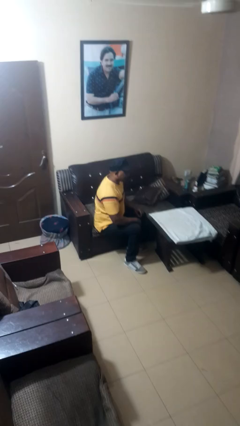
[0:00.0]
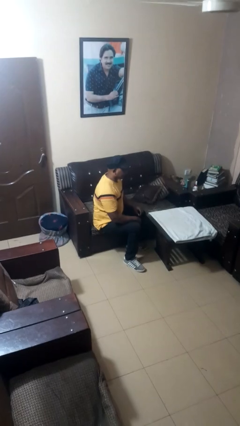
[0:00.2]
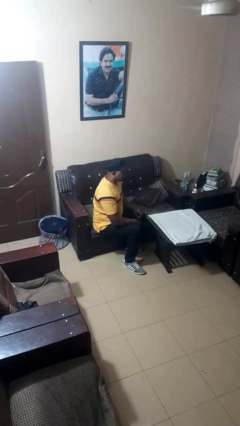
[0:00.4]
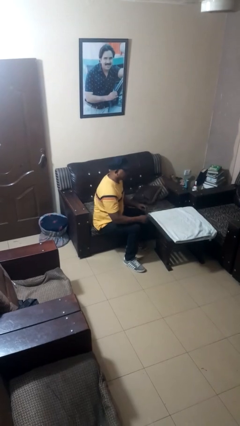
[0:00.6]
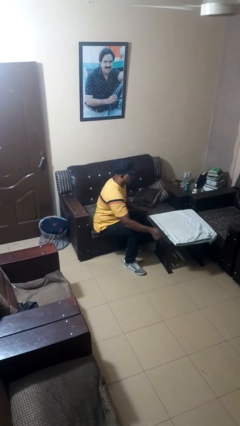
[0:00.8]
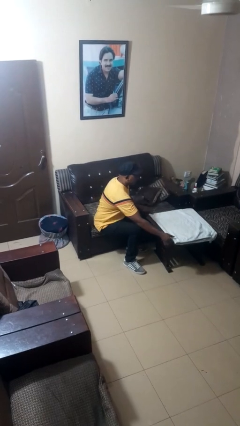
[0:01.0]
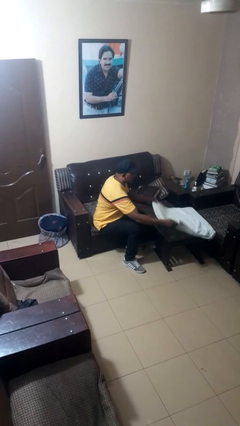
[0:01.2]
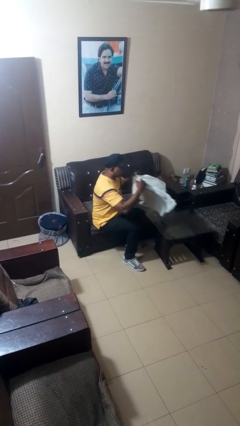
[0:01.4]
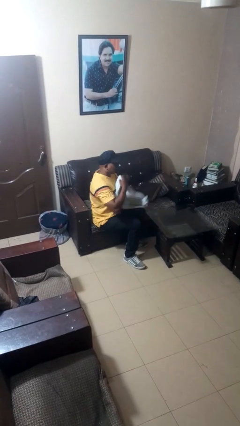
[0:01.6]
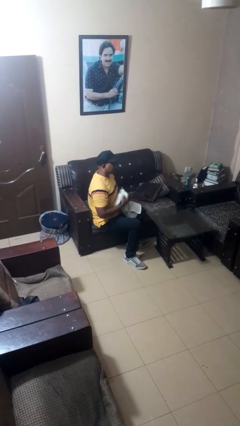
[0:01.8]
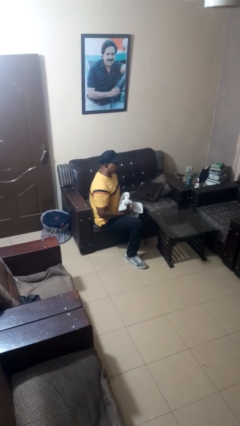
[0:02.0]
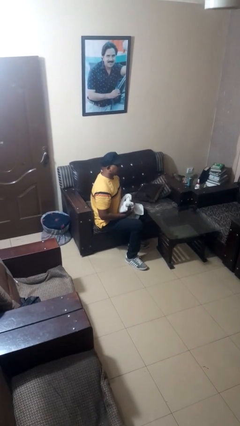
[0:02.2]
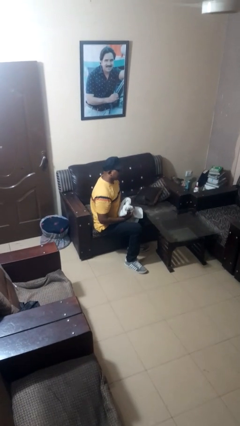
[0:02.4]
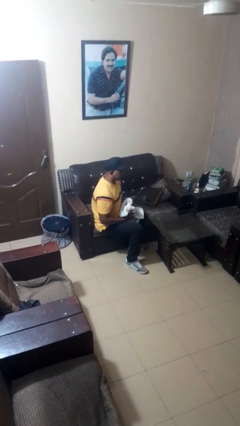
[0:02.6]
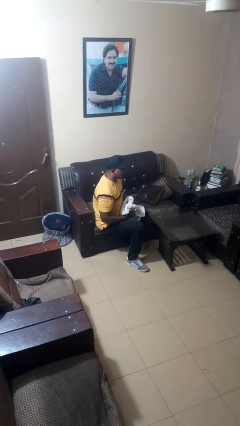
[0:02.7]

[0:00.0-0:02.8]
person folds tablecloth

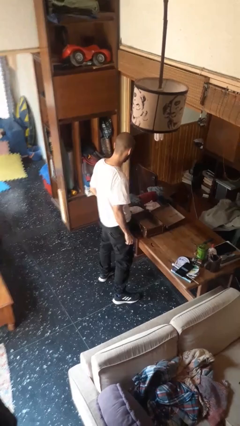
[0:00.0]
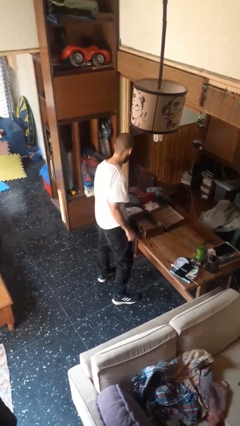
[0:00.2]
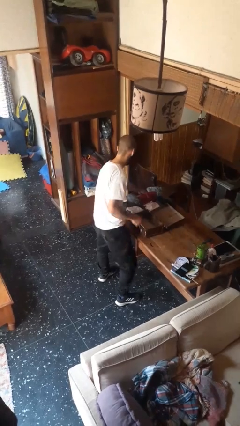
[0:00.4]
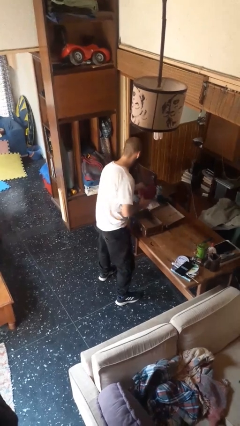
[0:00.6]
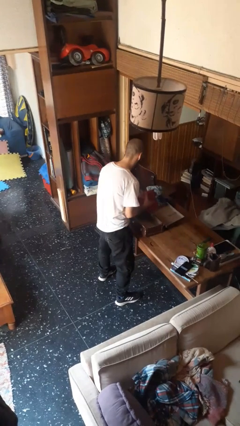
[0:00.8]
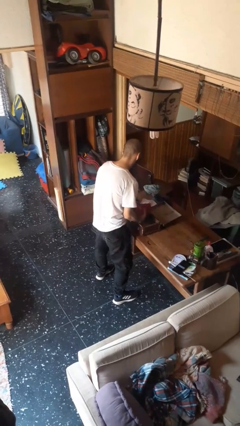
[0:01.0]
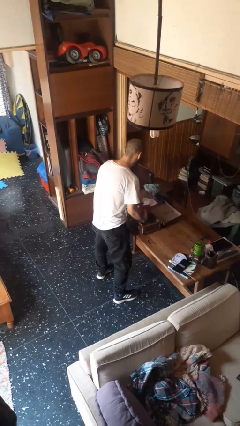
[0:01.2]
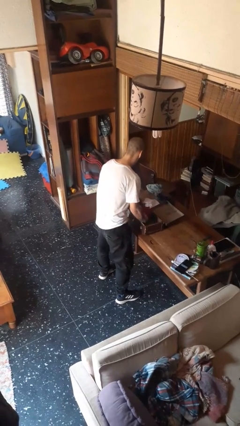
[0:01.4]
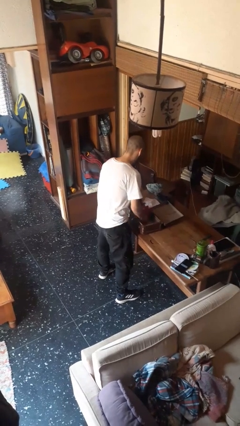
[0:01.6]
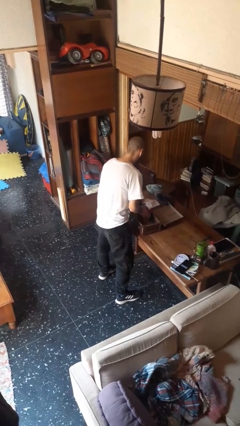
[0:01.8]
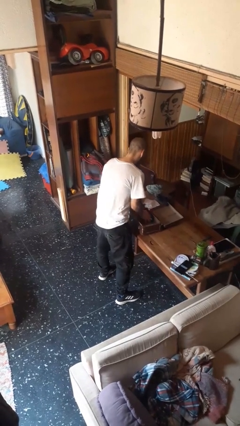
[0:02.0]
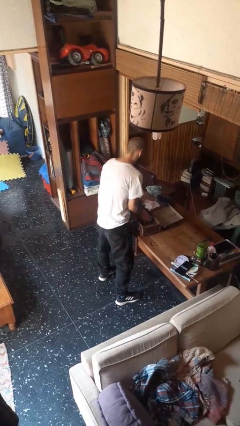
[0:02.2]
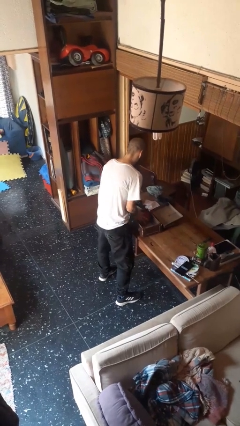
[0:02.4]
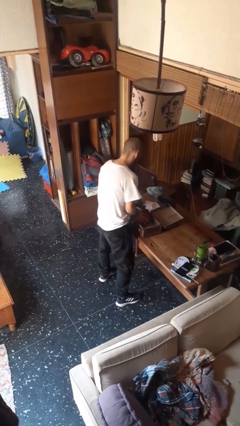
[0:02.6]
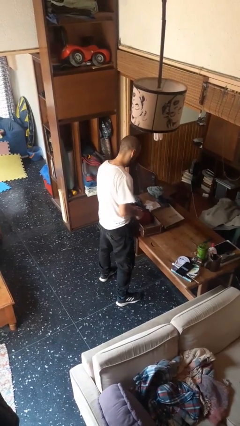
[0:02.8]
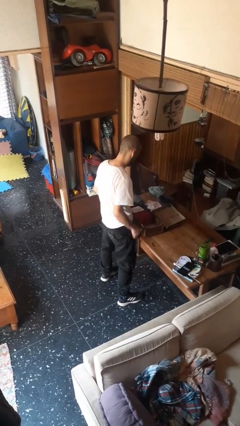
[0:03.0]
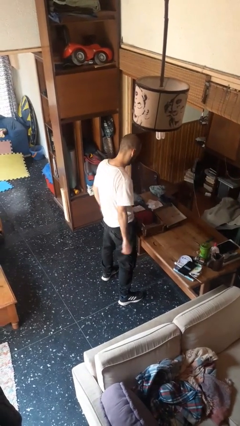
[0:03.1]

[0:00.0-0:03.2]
person loads clothes into suitcase

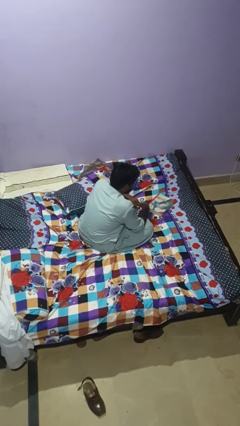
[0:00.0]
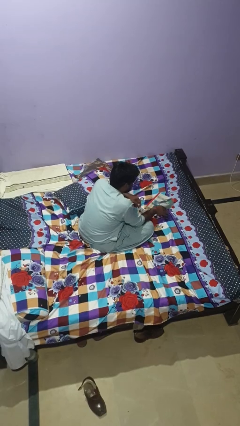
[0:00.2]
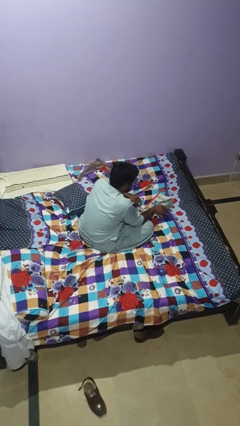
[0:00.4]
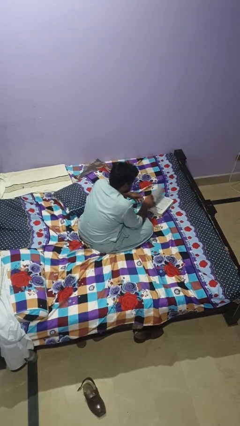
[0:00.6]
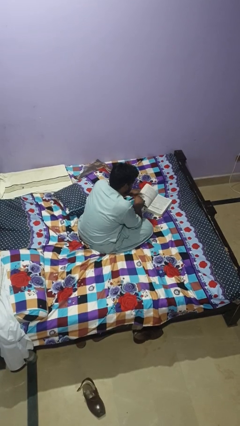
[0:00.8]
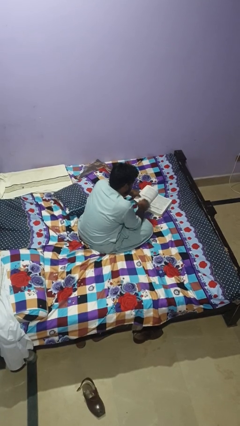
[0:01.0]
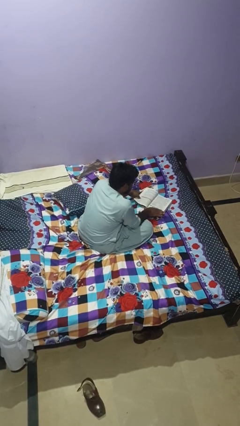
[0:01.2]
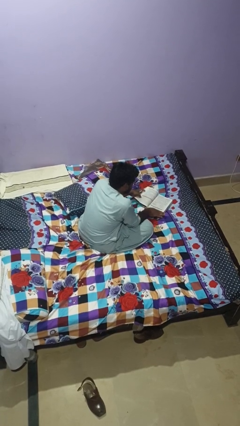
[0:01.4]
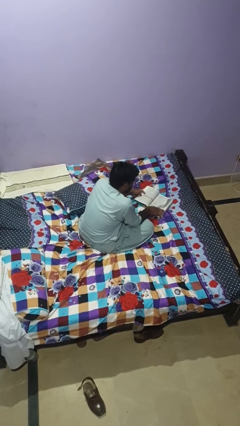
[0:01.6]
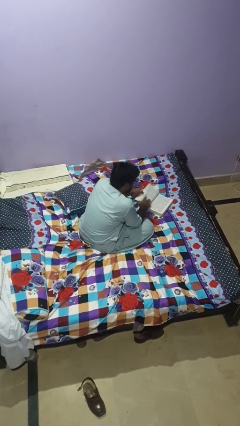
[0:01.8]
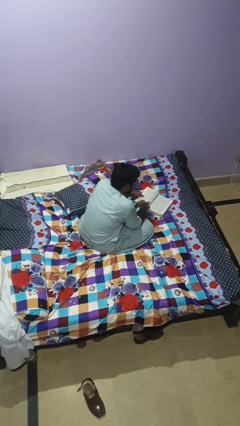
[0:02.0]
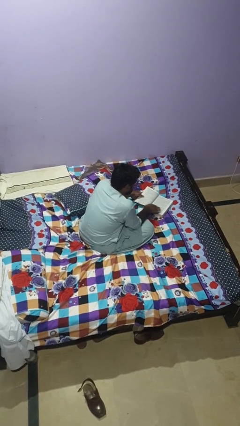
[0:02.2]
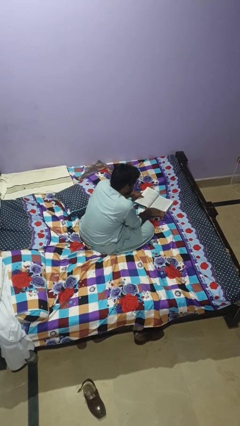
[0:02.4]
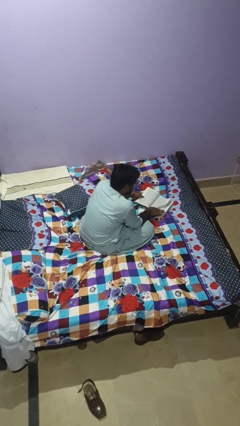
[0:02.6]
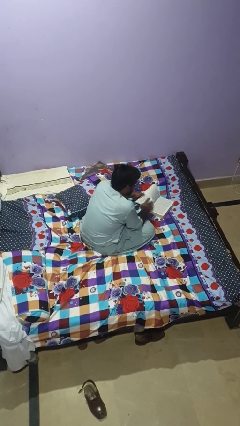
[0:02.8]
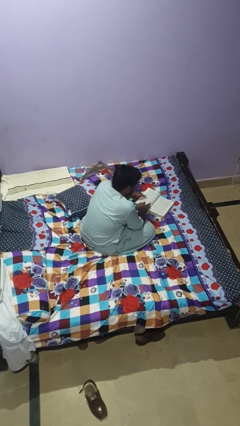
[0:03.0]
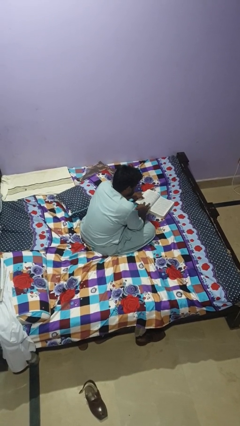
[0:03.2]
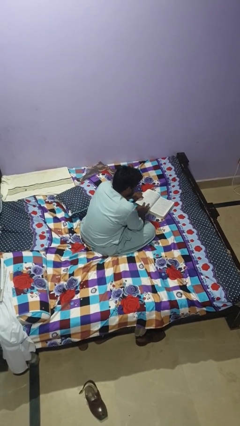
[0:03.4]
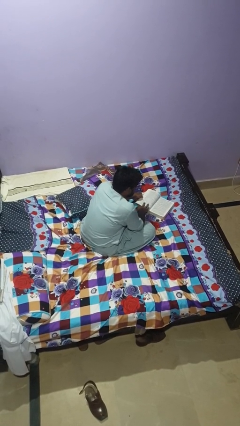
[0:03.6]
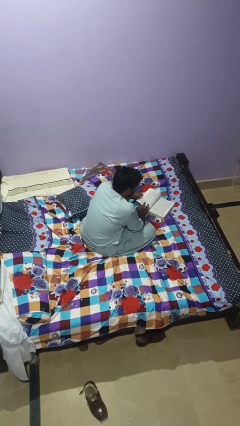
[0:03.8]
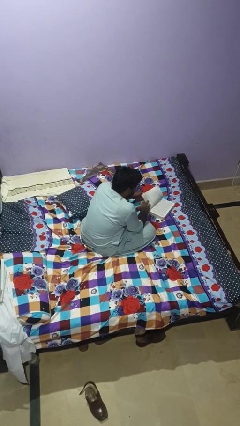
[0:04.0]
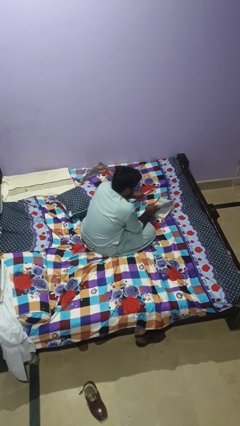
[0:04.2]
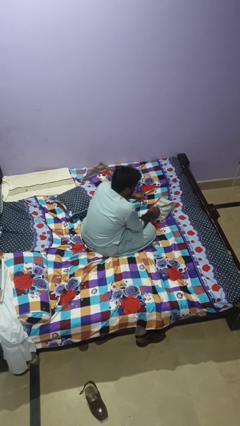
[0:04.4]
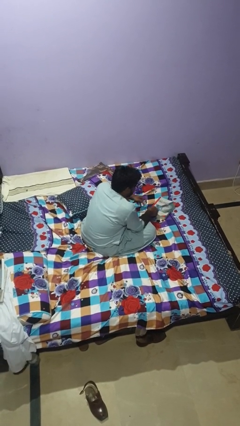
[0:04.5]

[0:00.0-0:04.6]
person reads book

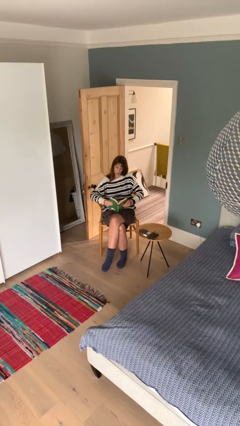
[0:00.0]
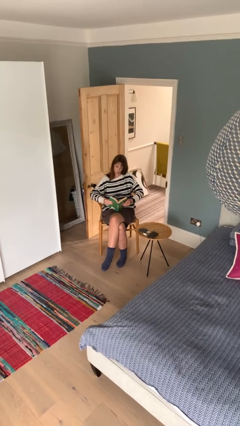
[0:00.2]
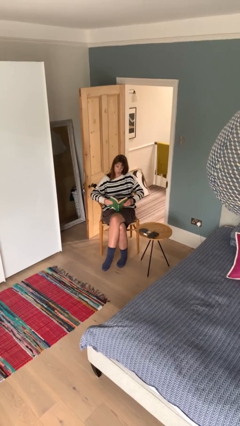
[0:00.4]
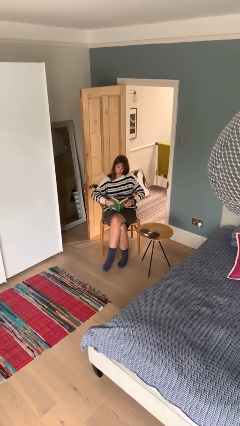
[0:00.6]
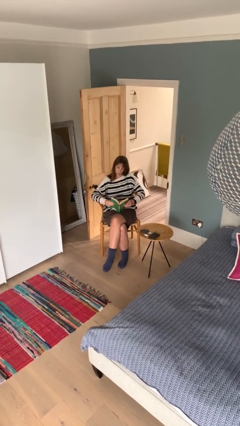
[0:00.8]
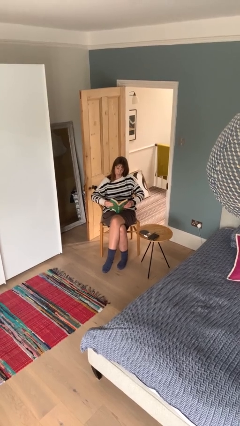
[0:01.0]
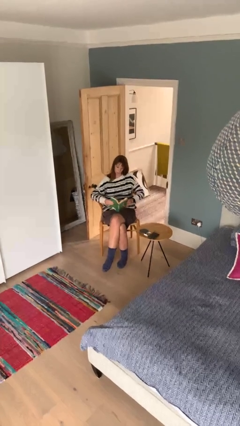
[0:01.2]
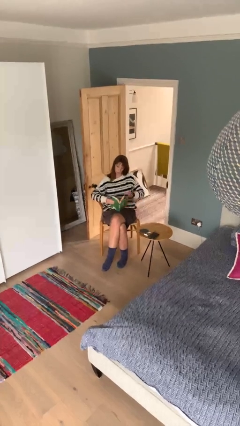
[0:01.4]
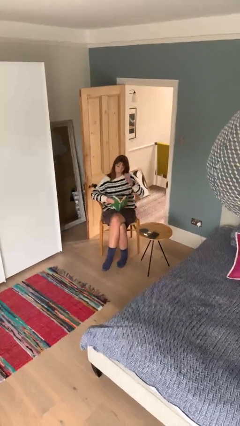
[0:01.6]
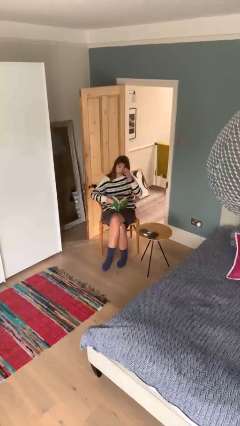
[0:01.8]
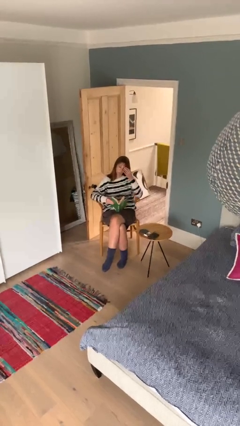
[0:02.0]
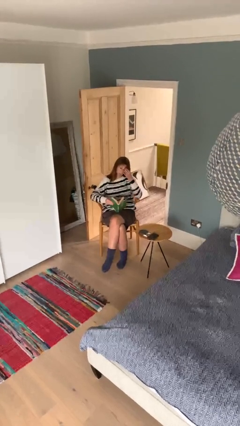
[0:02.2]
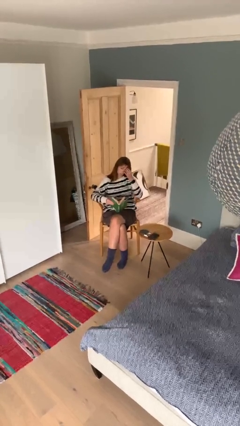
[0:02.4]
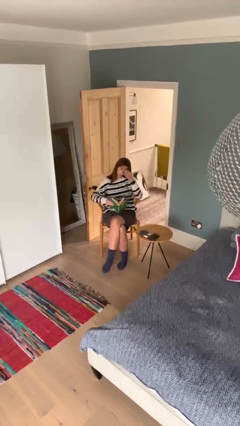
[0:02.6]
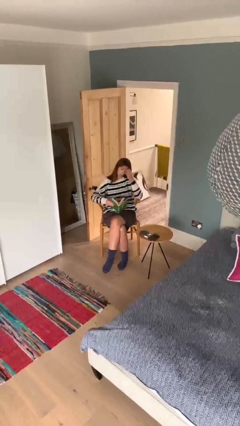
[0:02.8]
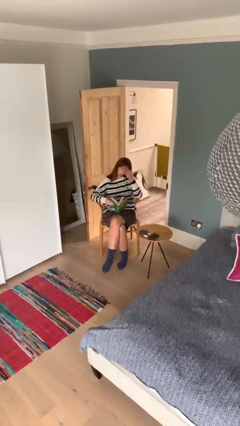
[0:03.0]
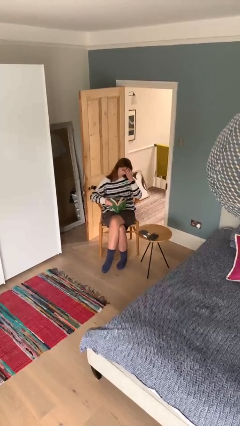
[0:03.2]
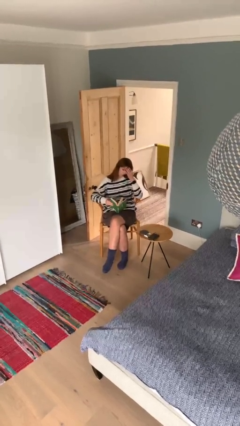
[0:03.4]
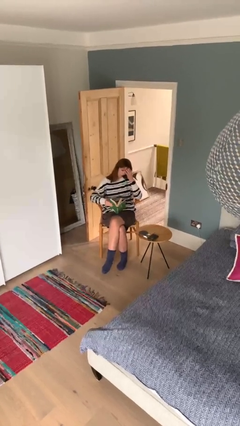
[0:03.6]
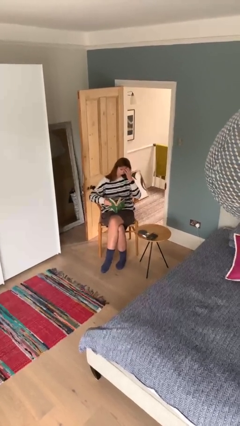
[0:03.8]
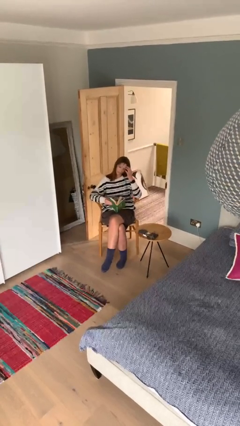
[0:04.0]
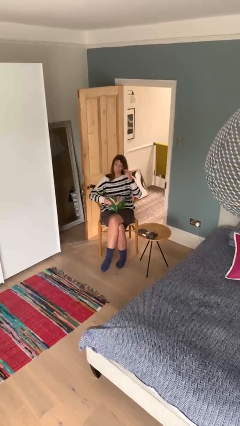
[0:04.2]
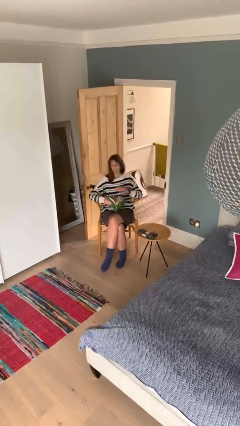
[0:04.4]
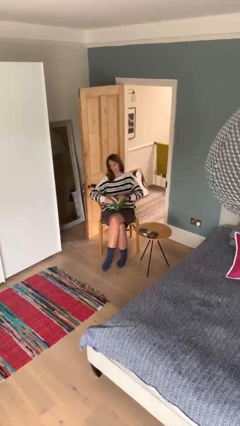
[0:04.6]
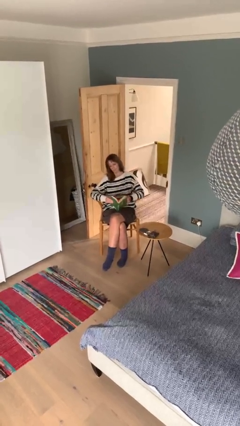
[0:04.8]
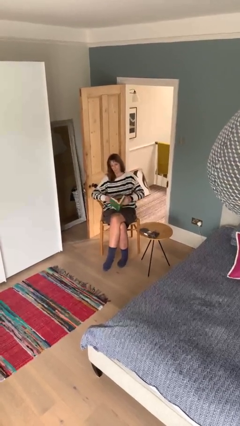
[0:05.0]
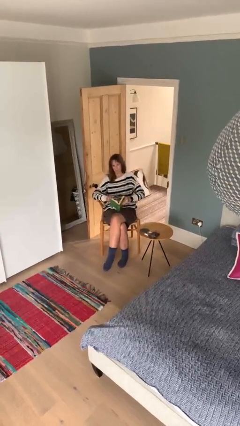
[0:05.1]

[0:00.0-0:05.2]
person reads document

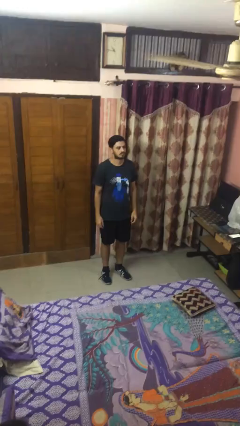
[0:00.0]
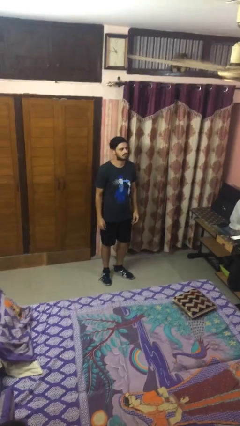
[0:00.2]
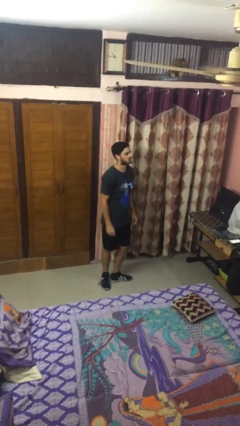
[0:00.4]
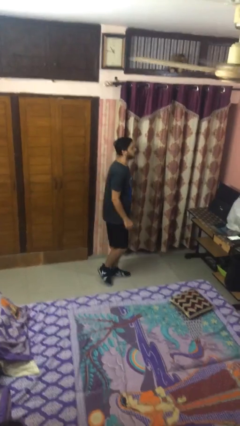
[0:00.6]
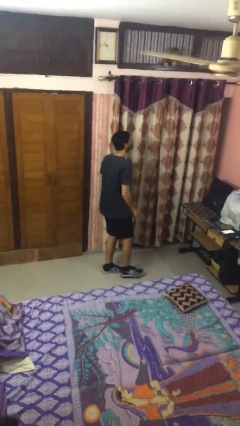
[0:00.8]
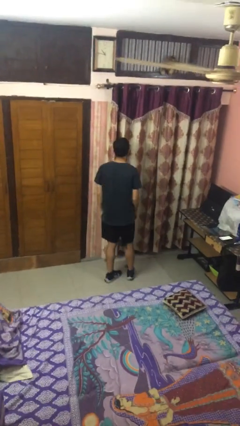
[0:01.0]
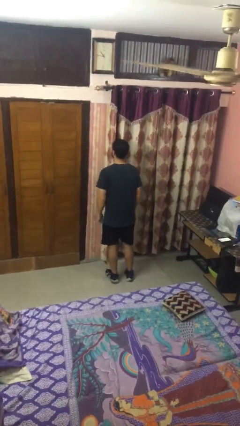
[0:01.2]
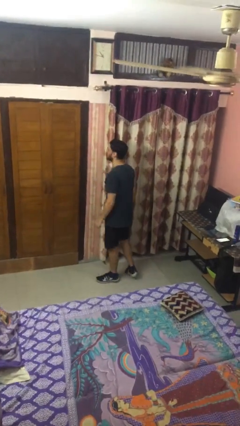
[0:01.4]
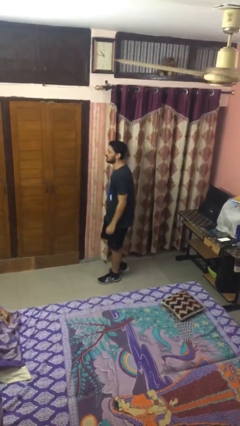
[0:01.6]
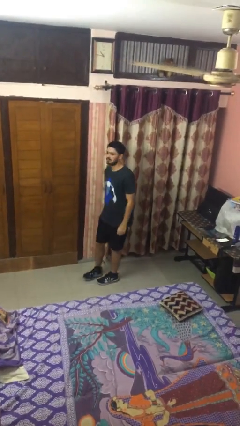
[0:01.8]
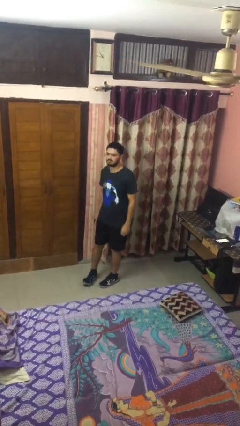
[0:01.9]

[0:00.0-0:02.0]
person twirls
